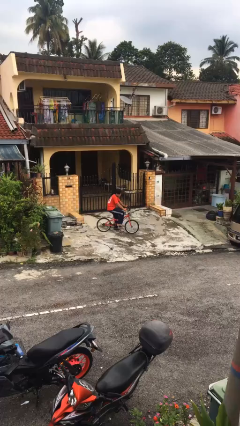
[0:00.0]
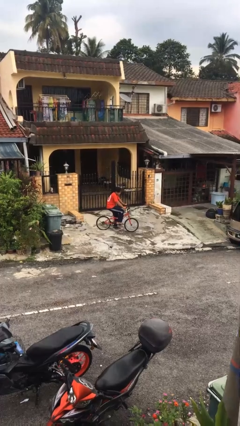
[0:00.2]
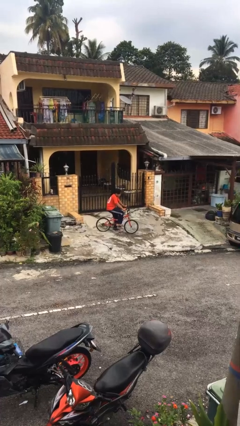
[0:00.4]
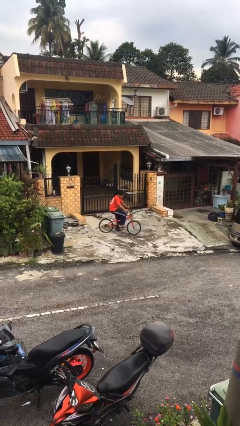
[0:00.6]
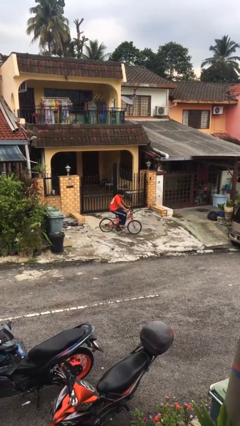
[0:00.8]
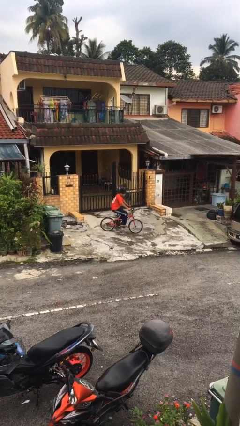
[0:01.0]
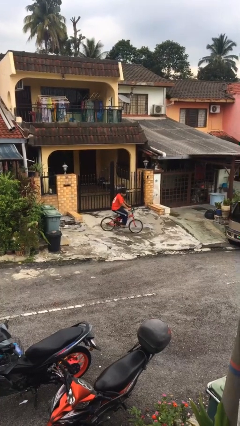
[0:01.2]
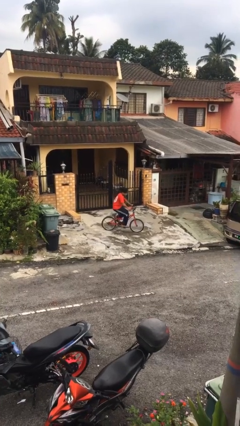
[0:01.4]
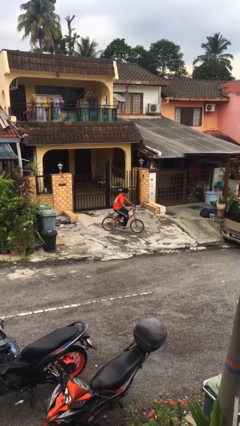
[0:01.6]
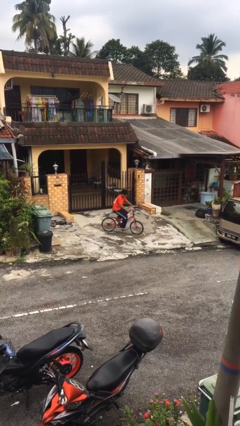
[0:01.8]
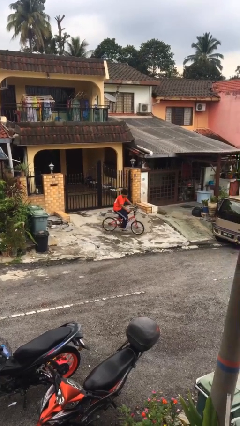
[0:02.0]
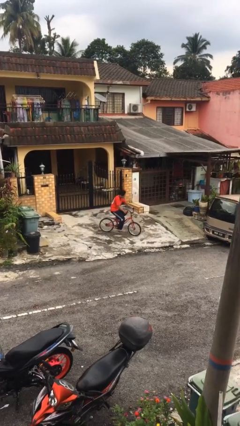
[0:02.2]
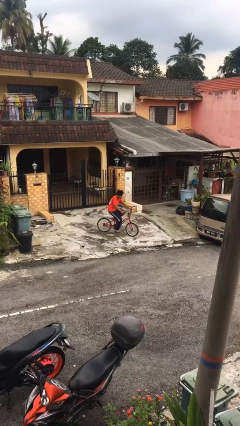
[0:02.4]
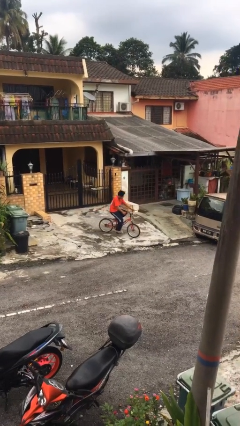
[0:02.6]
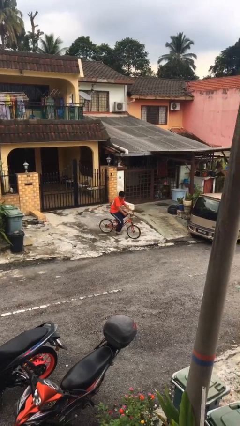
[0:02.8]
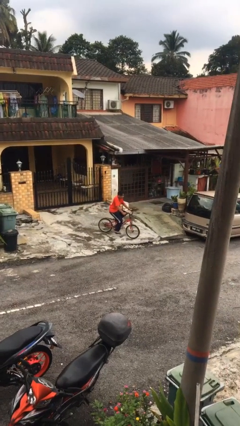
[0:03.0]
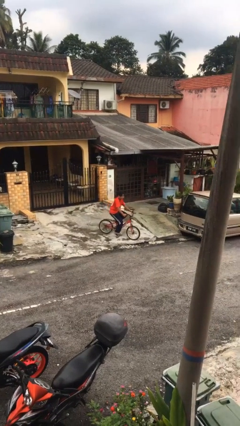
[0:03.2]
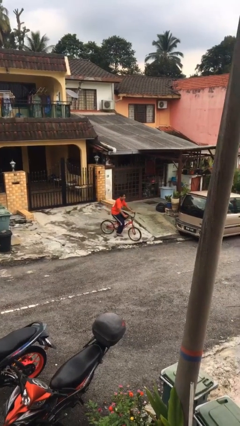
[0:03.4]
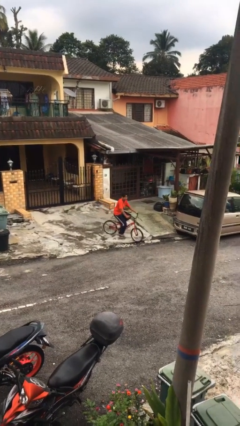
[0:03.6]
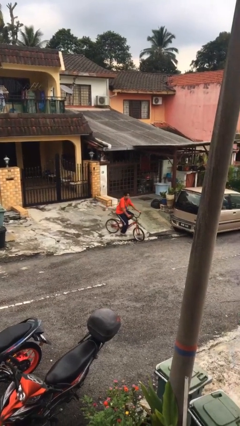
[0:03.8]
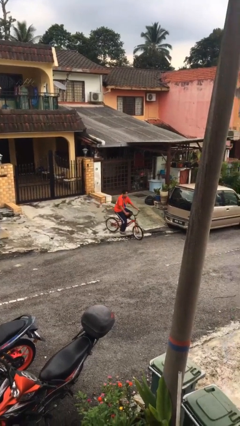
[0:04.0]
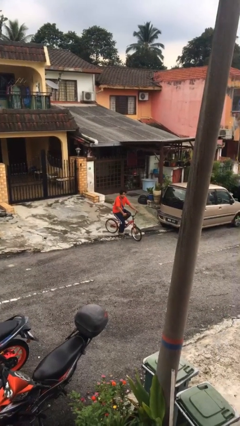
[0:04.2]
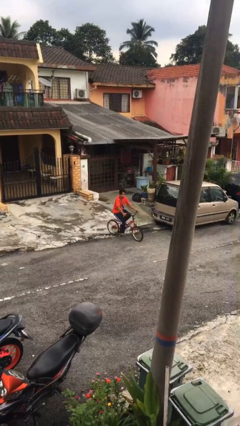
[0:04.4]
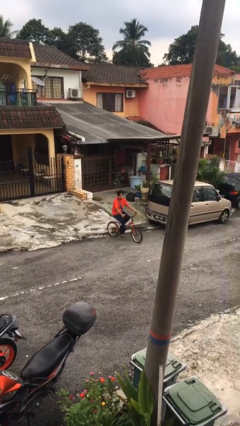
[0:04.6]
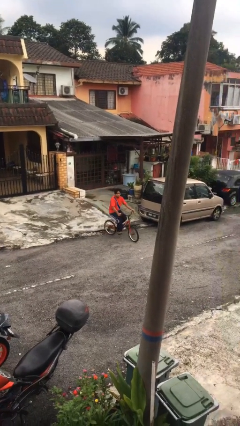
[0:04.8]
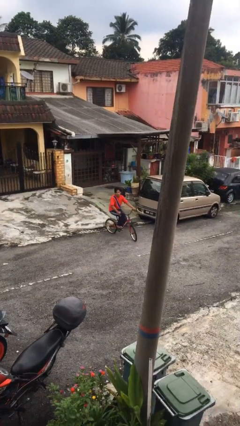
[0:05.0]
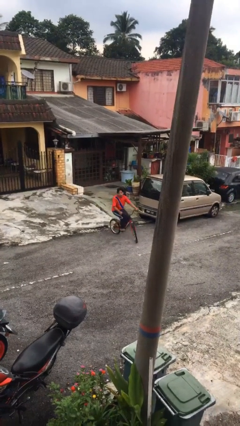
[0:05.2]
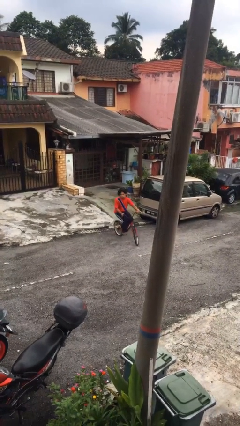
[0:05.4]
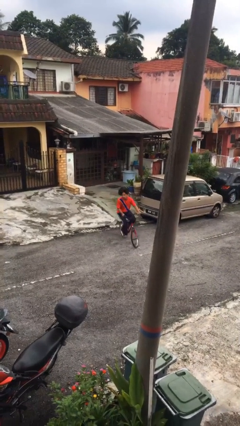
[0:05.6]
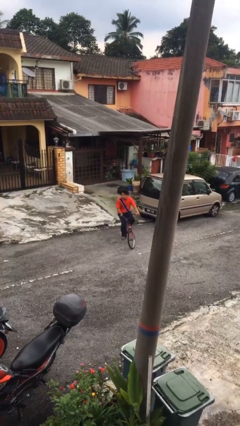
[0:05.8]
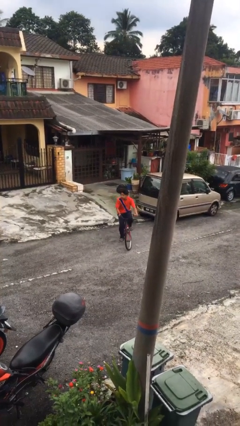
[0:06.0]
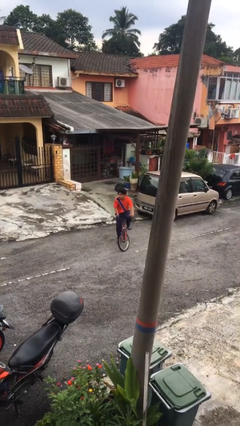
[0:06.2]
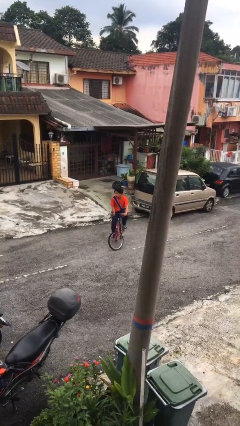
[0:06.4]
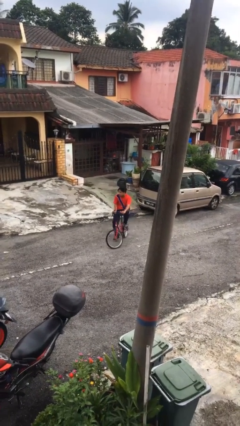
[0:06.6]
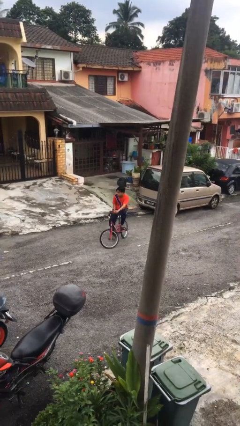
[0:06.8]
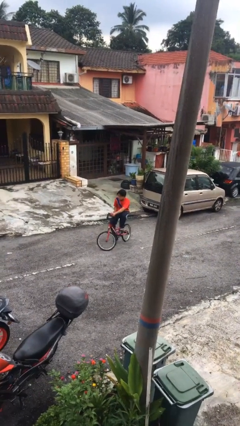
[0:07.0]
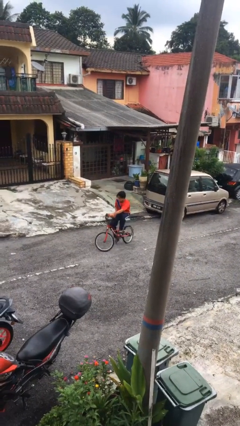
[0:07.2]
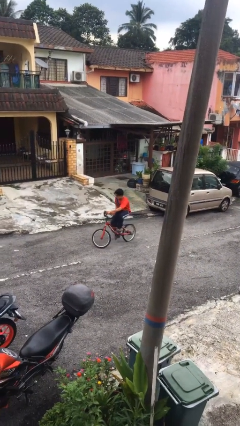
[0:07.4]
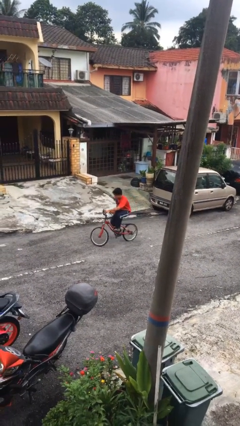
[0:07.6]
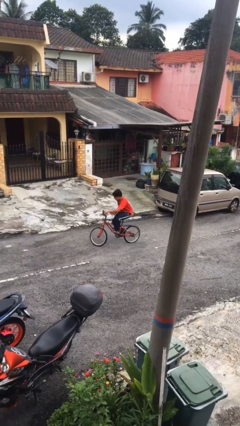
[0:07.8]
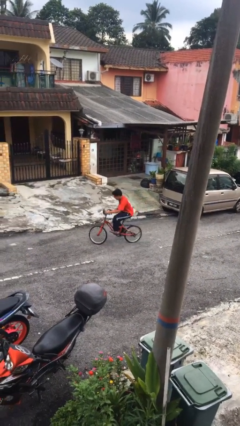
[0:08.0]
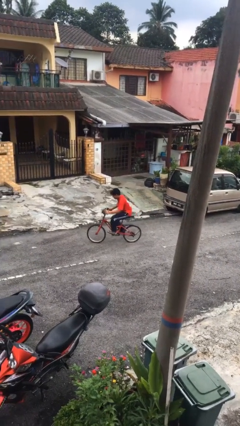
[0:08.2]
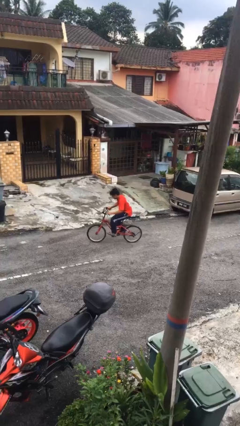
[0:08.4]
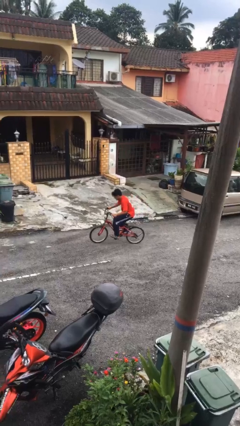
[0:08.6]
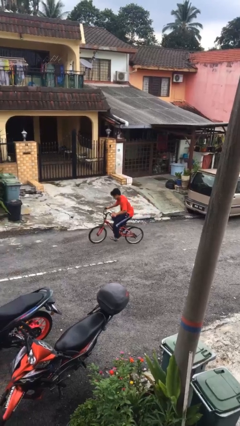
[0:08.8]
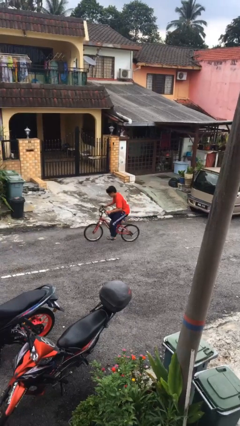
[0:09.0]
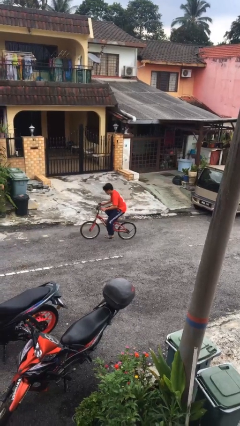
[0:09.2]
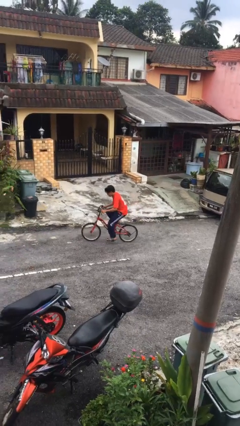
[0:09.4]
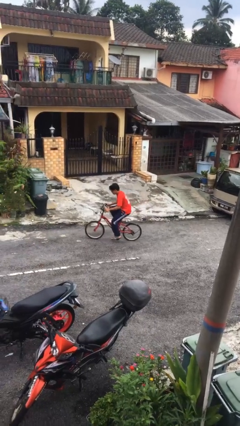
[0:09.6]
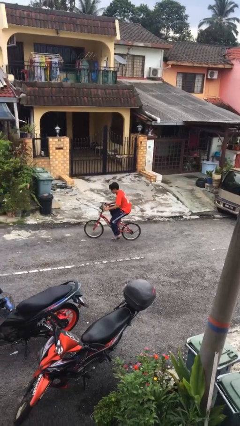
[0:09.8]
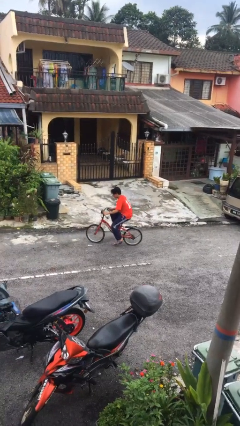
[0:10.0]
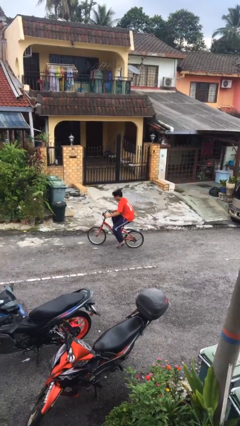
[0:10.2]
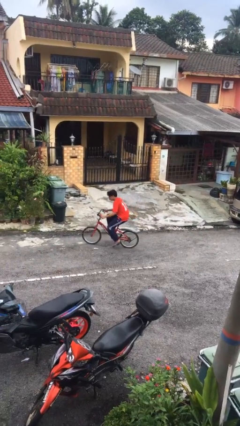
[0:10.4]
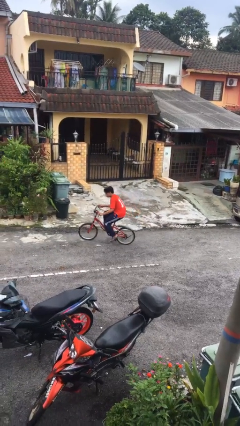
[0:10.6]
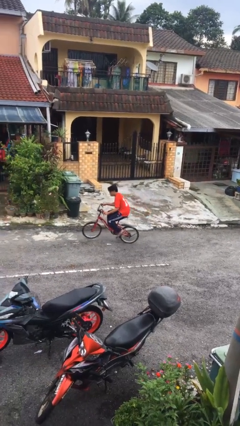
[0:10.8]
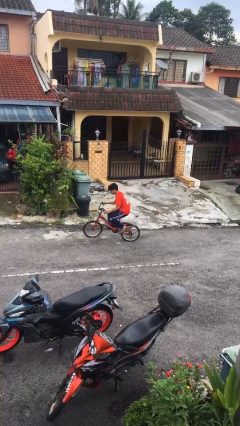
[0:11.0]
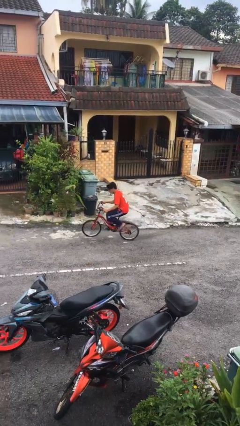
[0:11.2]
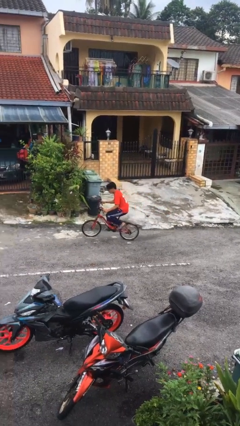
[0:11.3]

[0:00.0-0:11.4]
person rides bicycle

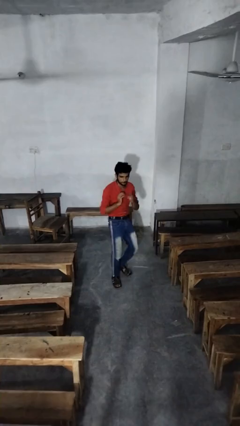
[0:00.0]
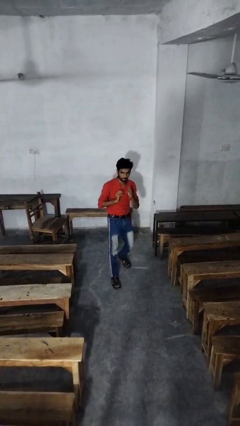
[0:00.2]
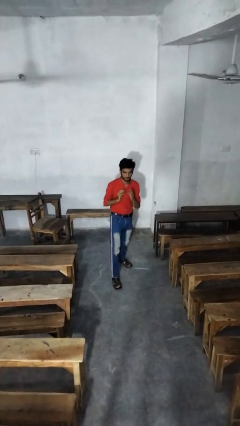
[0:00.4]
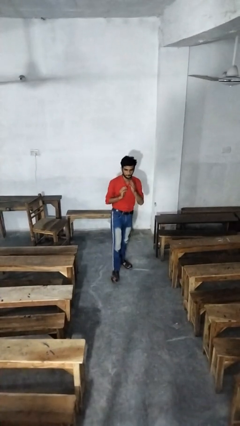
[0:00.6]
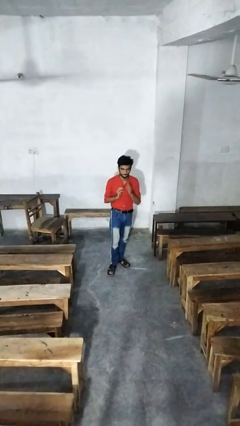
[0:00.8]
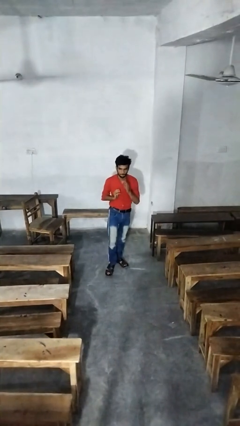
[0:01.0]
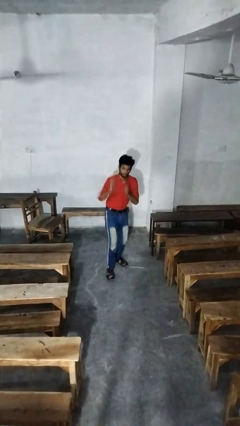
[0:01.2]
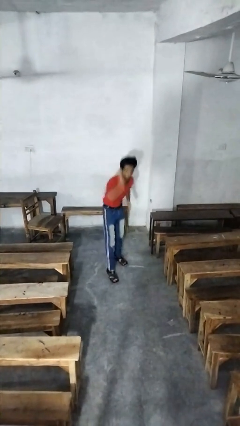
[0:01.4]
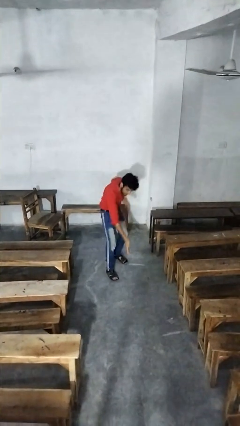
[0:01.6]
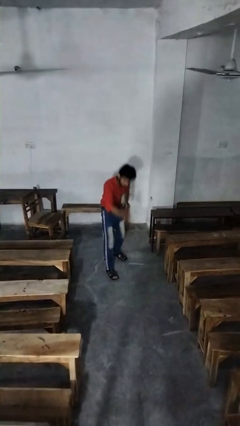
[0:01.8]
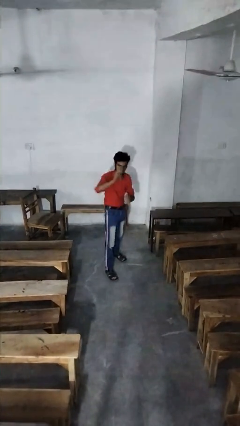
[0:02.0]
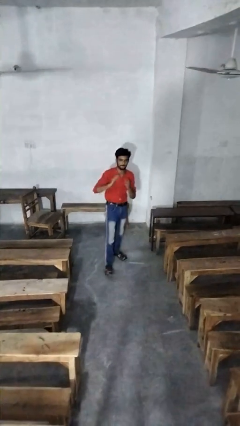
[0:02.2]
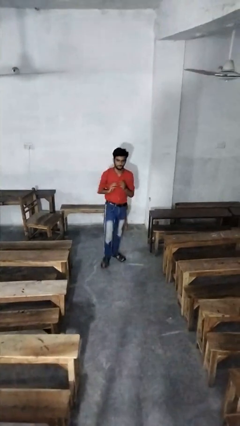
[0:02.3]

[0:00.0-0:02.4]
person karate chop

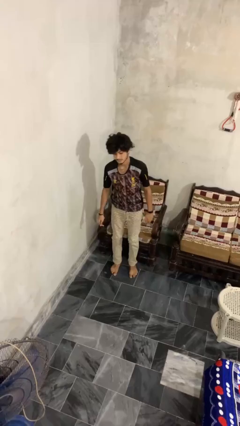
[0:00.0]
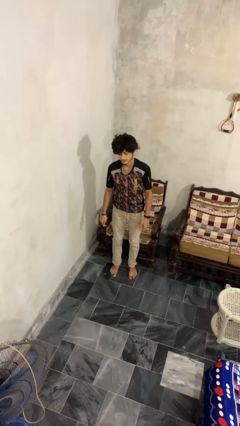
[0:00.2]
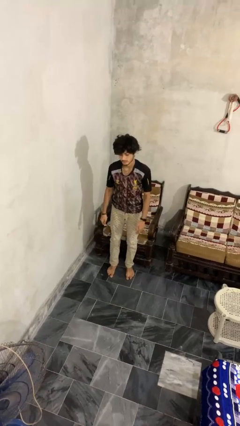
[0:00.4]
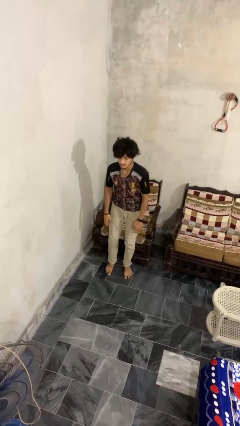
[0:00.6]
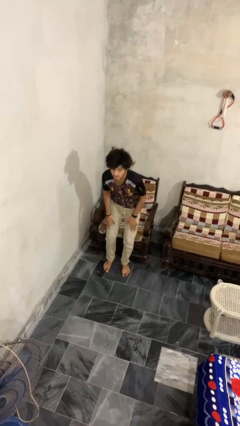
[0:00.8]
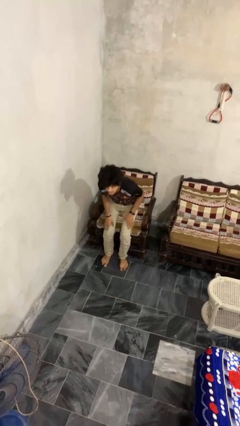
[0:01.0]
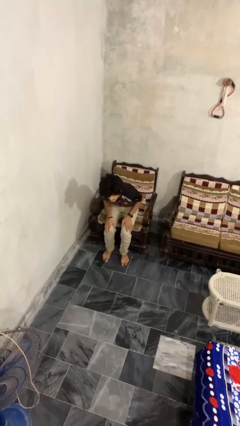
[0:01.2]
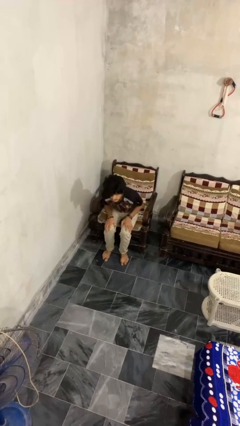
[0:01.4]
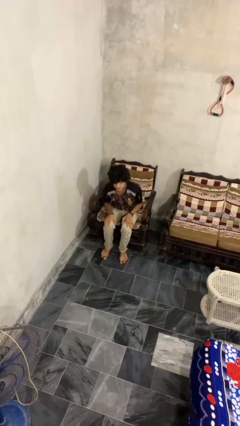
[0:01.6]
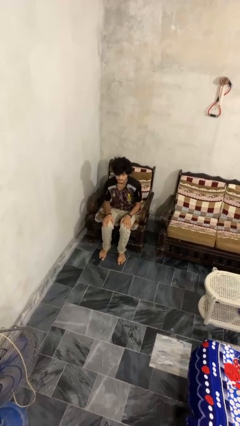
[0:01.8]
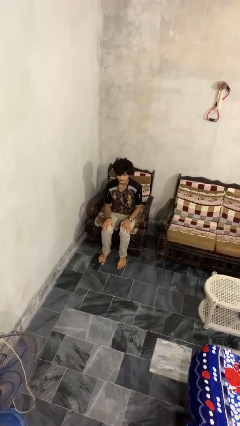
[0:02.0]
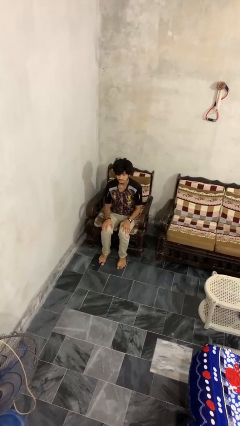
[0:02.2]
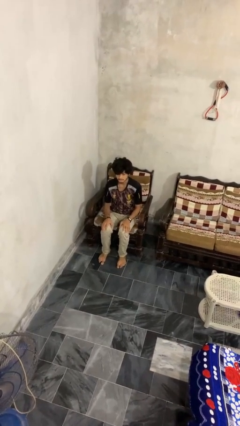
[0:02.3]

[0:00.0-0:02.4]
person sits down

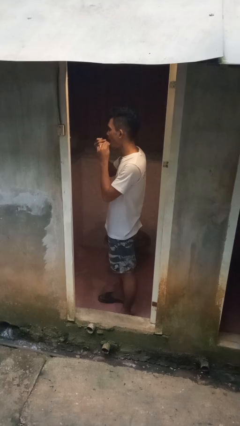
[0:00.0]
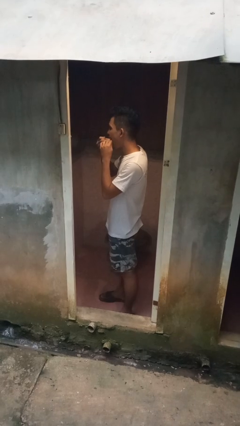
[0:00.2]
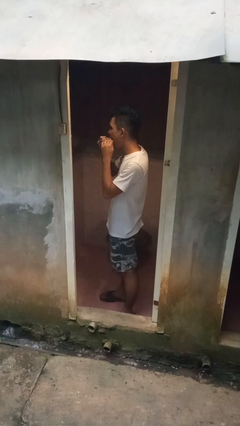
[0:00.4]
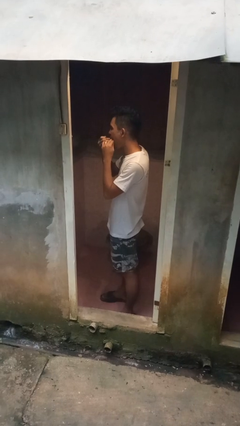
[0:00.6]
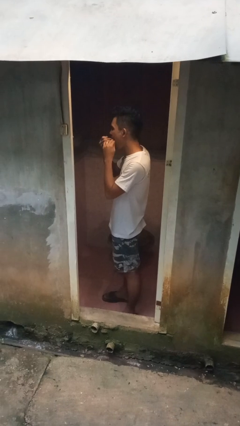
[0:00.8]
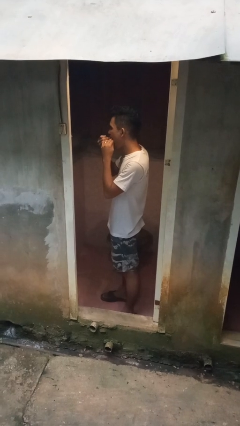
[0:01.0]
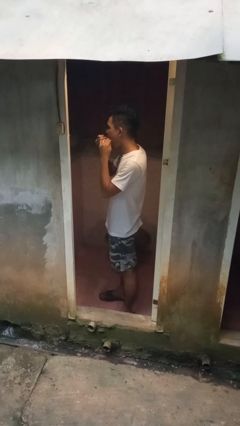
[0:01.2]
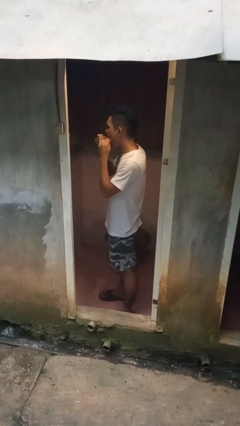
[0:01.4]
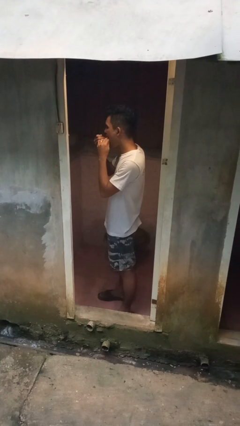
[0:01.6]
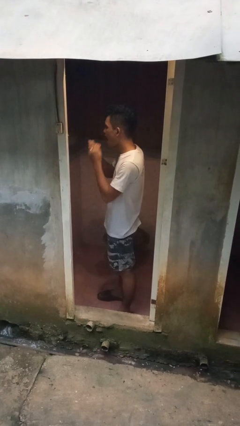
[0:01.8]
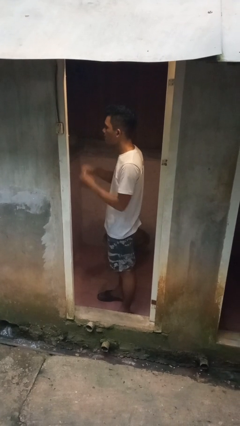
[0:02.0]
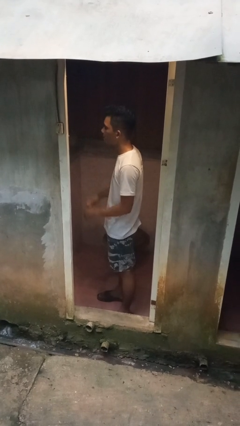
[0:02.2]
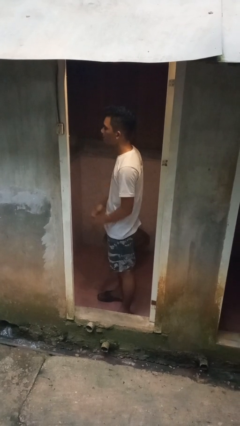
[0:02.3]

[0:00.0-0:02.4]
person flosses
